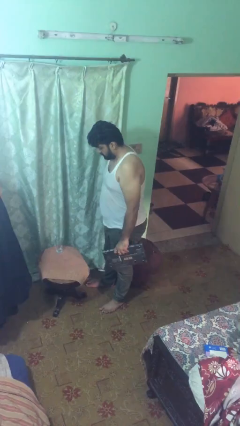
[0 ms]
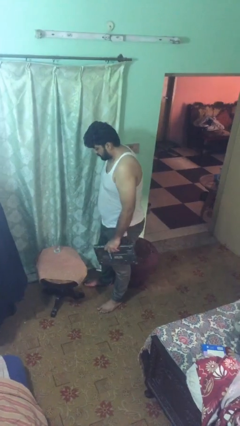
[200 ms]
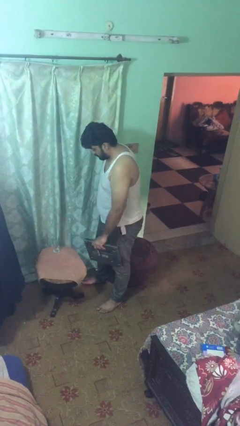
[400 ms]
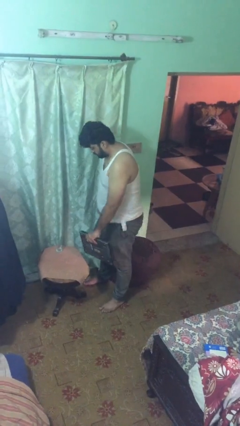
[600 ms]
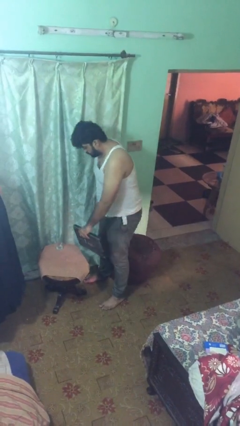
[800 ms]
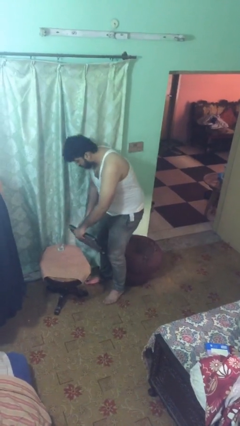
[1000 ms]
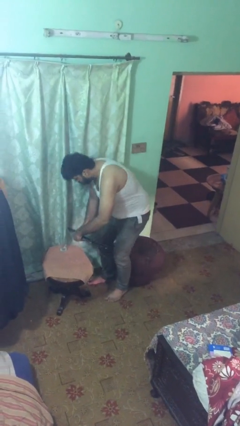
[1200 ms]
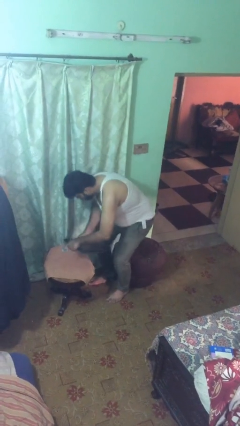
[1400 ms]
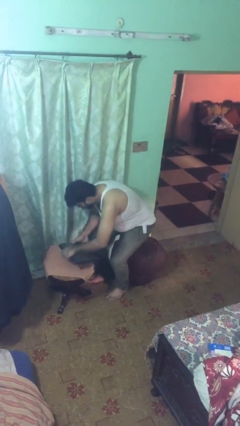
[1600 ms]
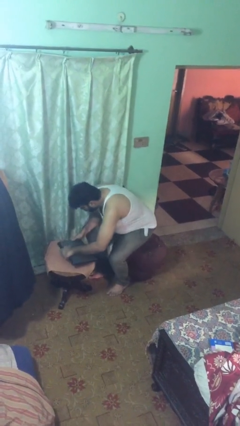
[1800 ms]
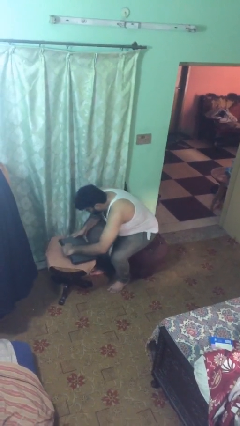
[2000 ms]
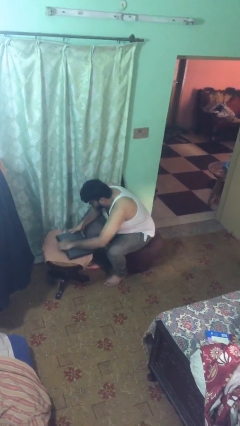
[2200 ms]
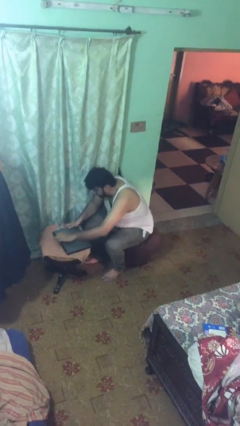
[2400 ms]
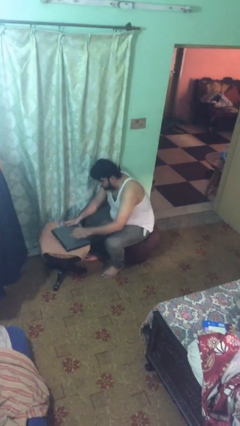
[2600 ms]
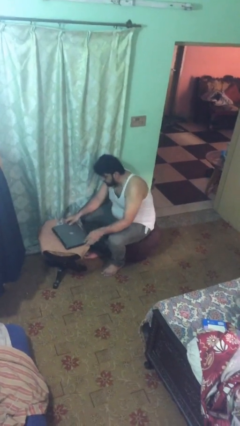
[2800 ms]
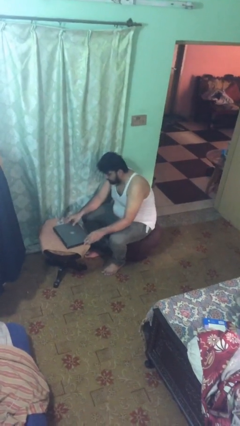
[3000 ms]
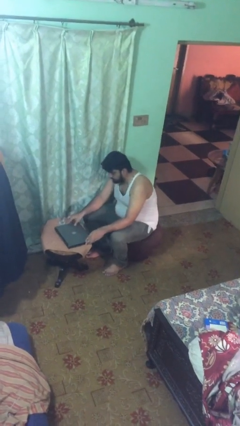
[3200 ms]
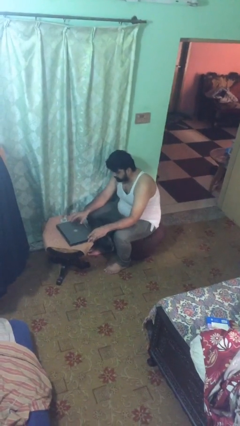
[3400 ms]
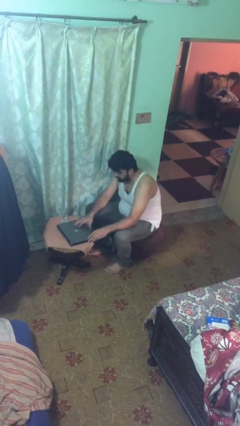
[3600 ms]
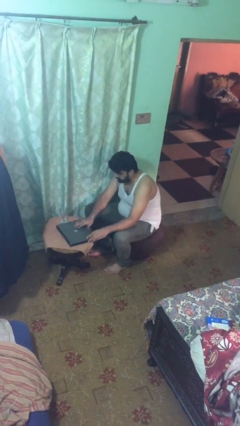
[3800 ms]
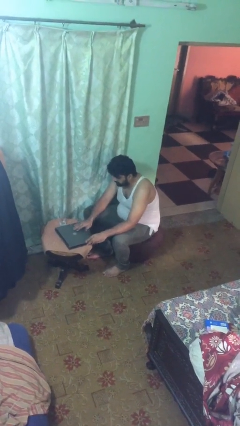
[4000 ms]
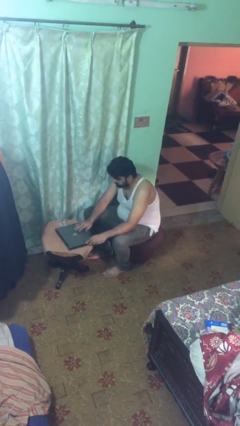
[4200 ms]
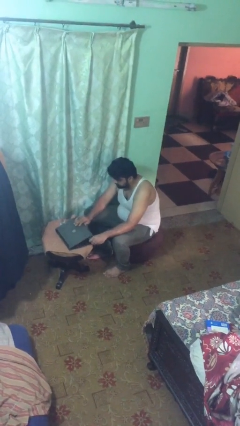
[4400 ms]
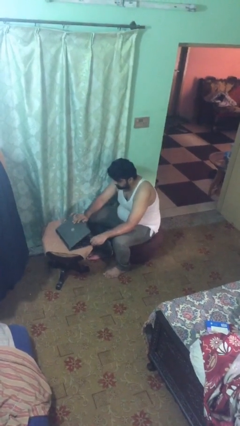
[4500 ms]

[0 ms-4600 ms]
person sits down

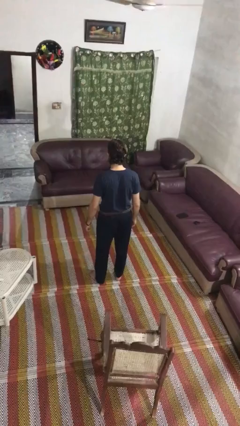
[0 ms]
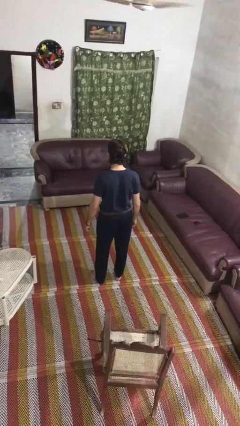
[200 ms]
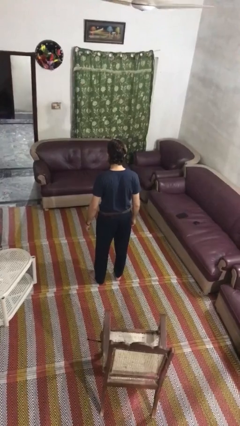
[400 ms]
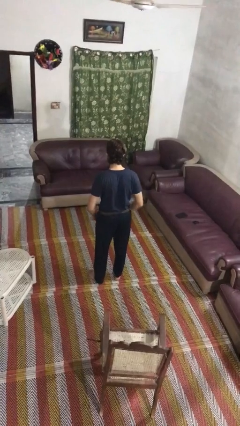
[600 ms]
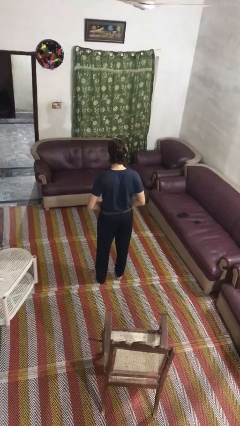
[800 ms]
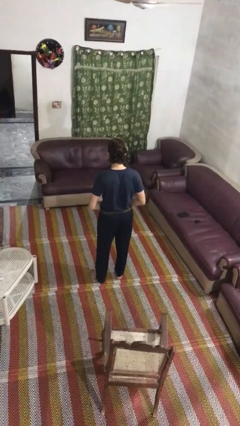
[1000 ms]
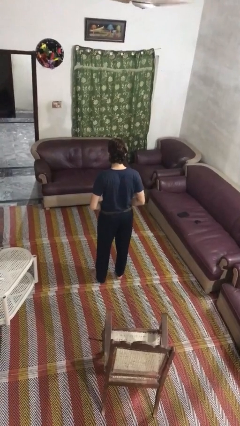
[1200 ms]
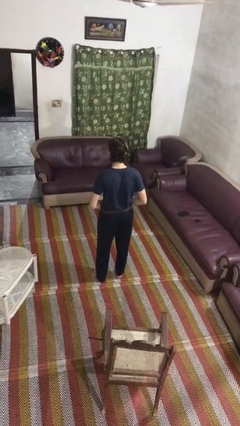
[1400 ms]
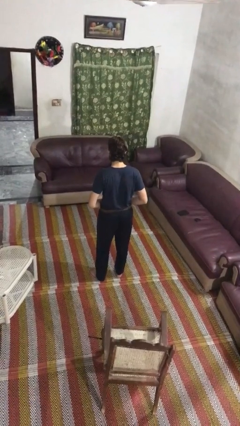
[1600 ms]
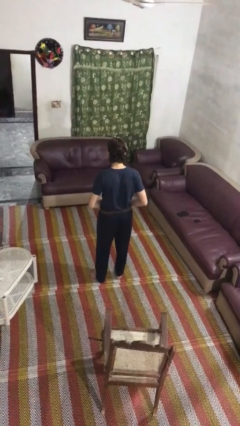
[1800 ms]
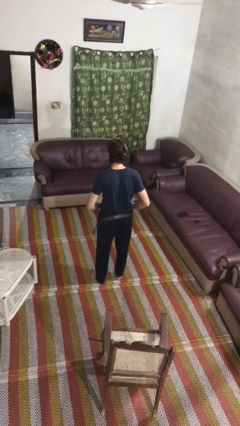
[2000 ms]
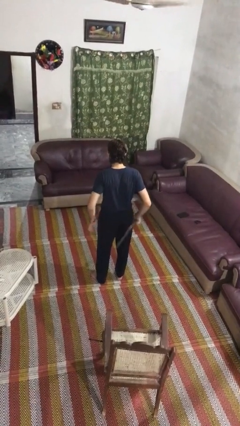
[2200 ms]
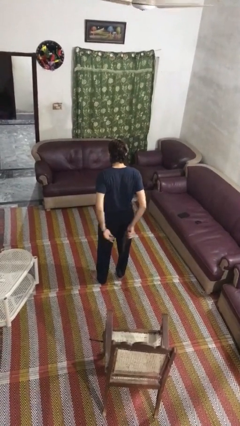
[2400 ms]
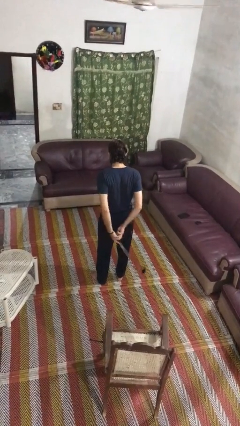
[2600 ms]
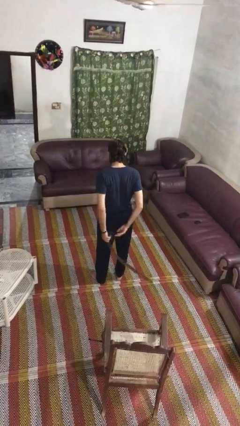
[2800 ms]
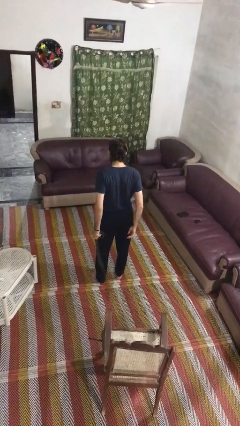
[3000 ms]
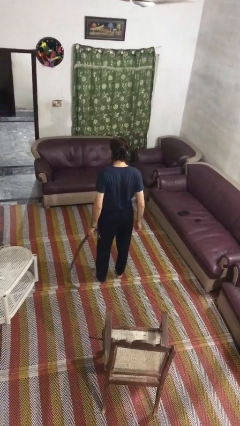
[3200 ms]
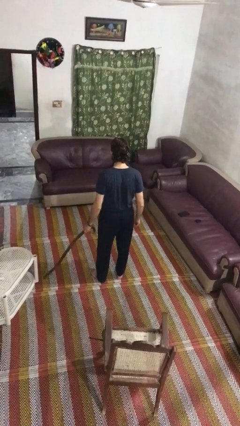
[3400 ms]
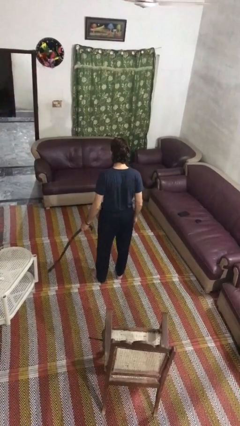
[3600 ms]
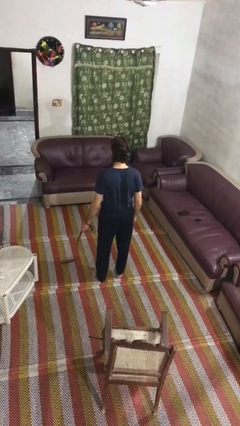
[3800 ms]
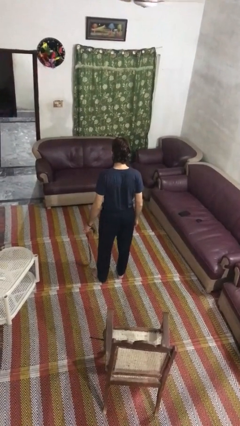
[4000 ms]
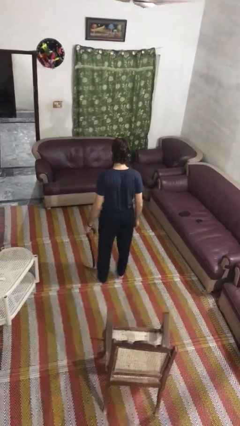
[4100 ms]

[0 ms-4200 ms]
person takes off belt

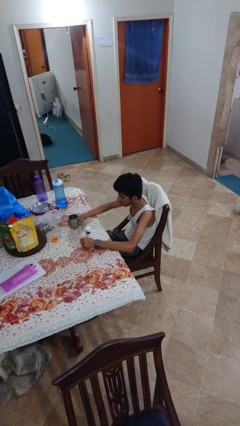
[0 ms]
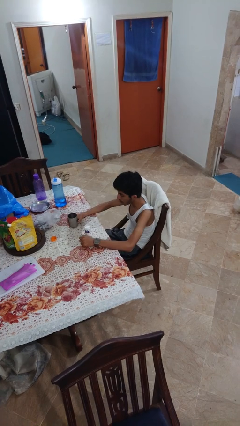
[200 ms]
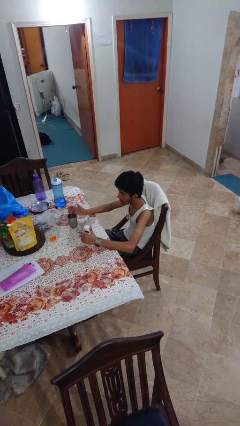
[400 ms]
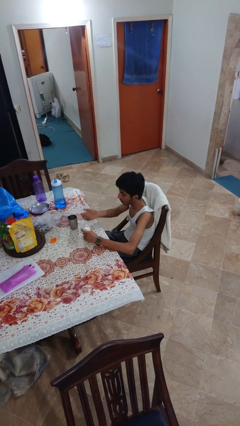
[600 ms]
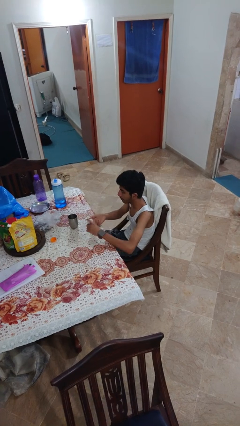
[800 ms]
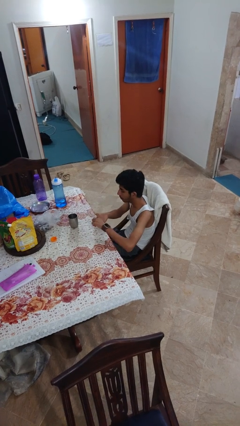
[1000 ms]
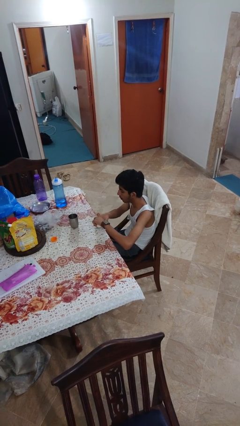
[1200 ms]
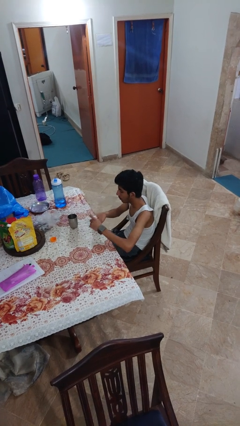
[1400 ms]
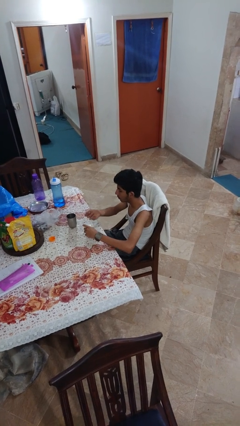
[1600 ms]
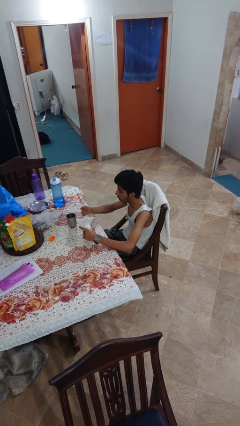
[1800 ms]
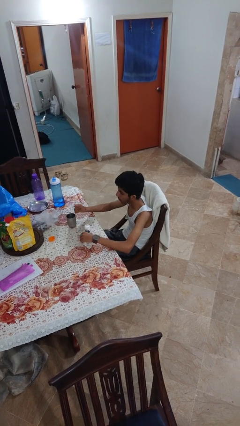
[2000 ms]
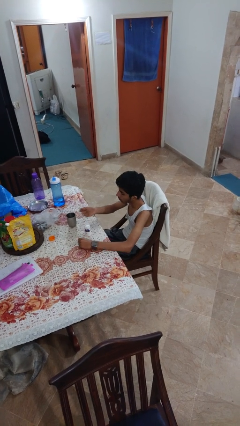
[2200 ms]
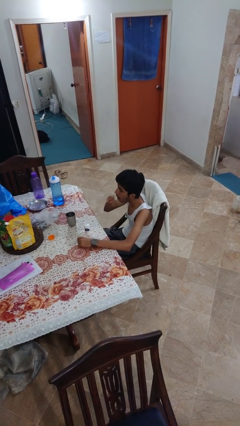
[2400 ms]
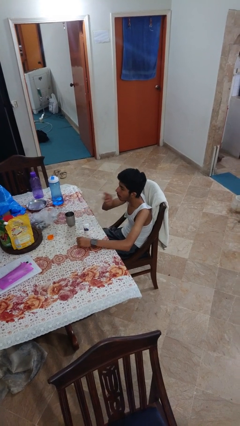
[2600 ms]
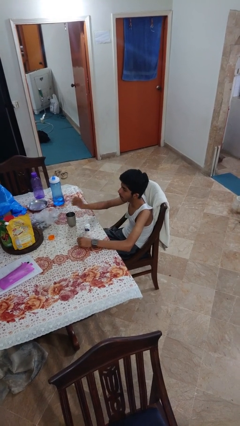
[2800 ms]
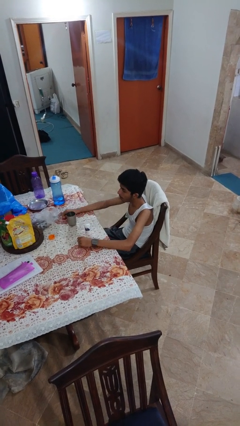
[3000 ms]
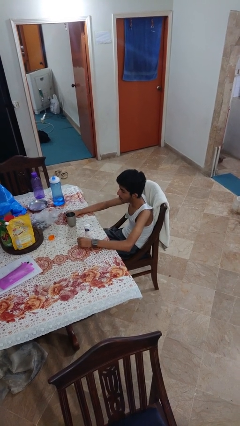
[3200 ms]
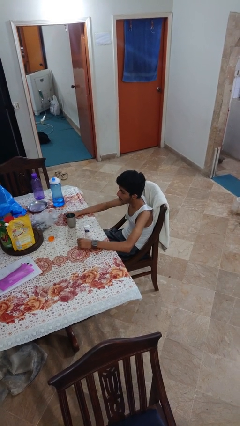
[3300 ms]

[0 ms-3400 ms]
person takes medicine pills

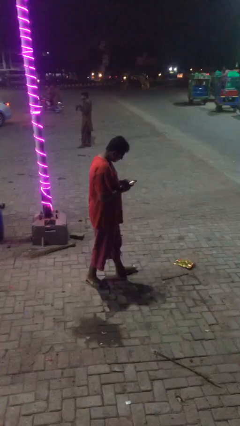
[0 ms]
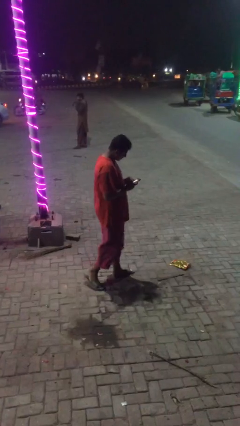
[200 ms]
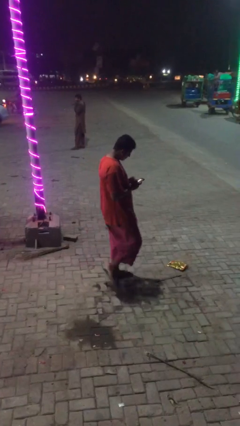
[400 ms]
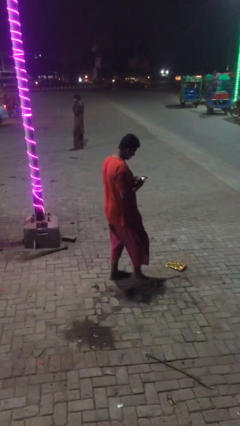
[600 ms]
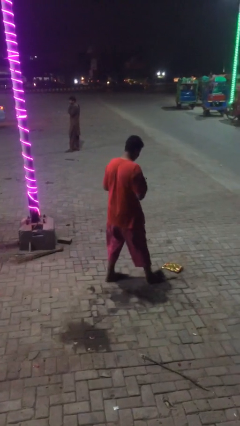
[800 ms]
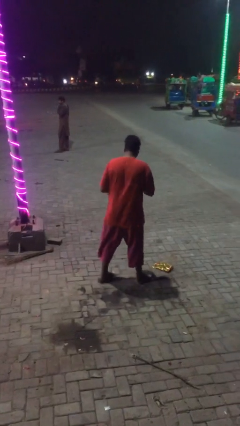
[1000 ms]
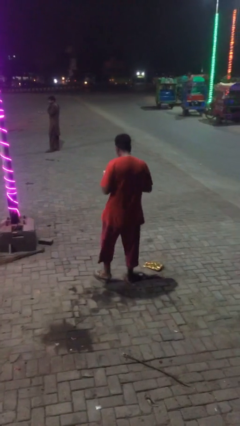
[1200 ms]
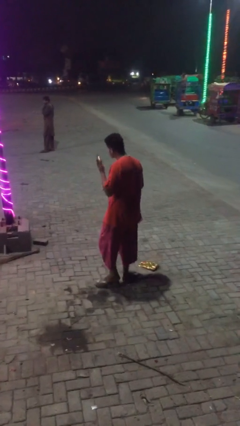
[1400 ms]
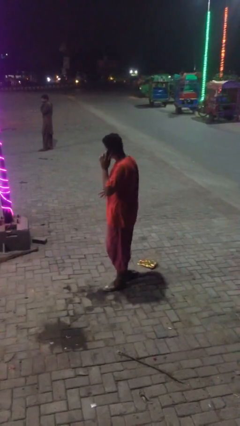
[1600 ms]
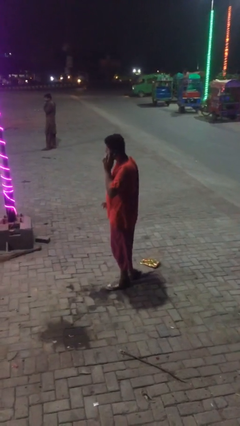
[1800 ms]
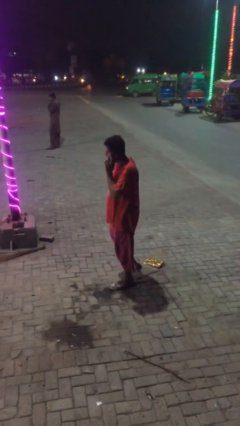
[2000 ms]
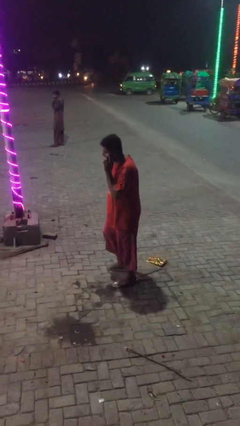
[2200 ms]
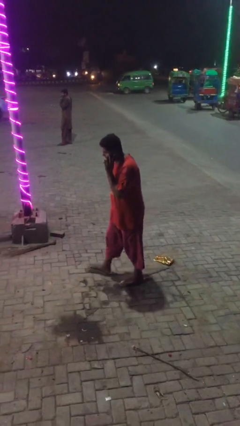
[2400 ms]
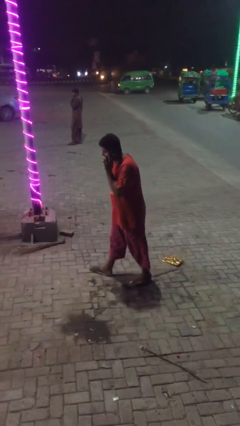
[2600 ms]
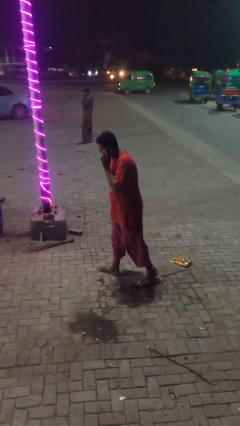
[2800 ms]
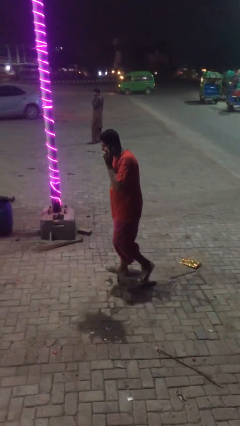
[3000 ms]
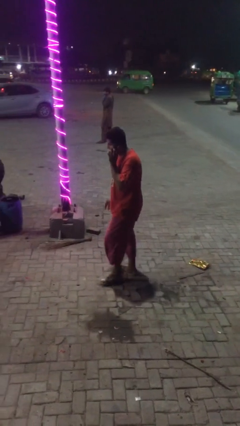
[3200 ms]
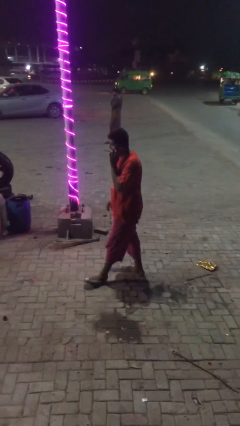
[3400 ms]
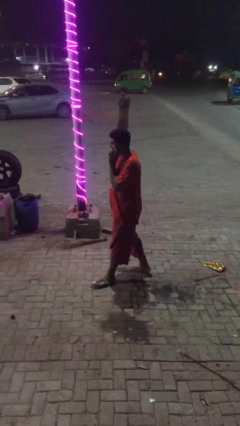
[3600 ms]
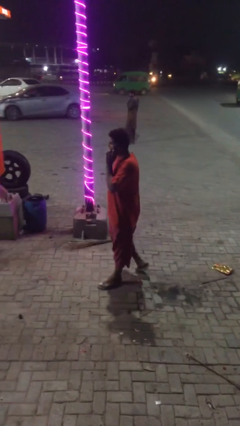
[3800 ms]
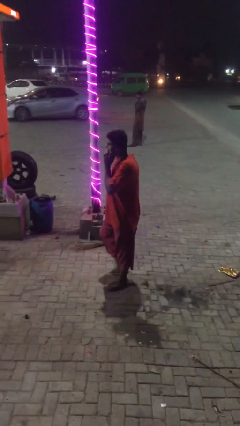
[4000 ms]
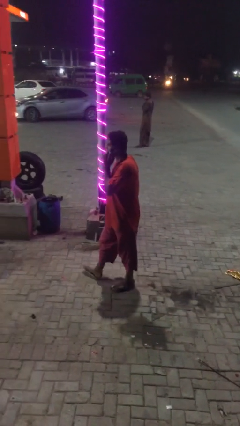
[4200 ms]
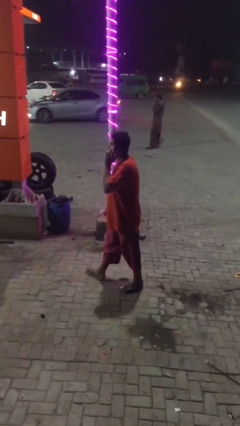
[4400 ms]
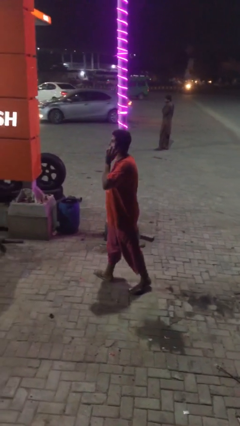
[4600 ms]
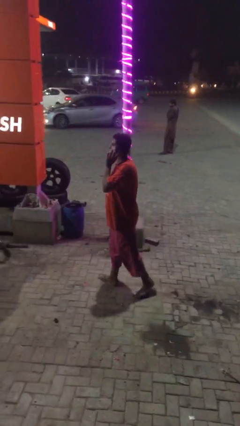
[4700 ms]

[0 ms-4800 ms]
person talks on phone

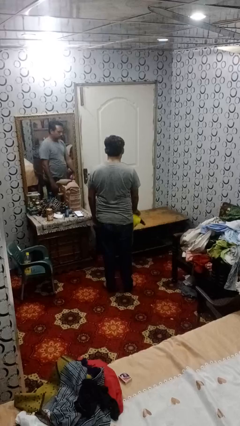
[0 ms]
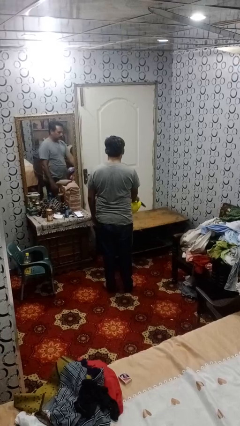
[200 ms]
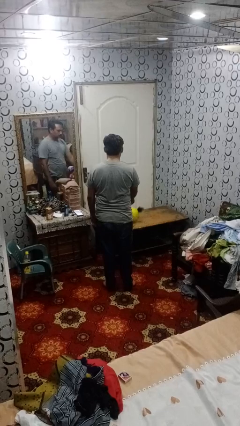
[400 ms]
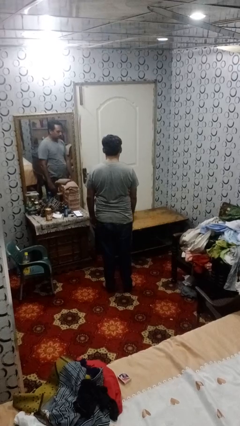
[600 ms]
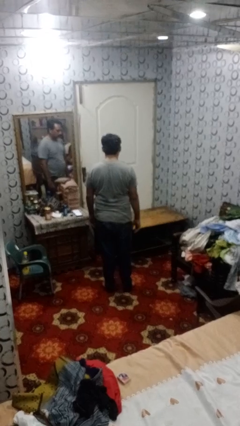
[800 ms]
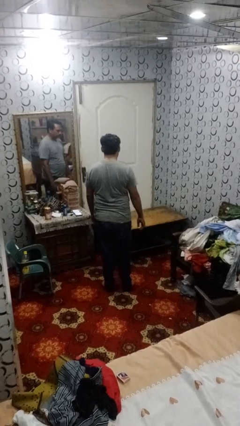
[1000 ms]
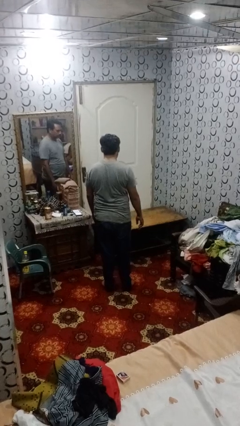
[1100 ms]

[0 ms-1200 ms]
person throws object on table
